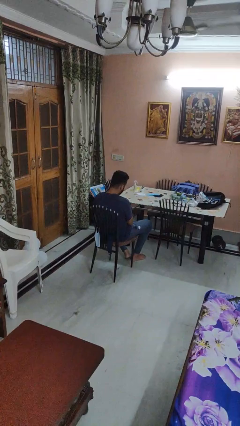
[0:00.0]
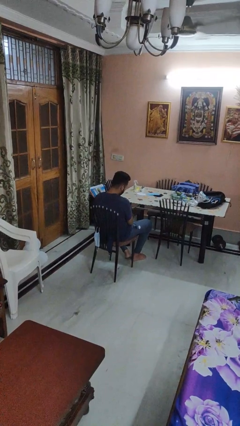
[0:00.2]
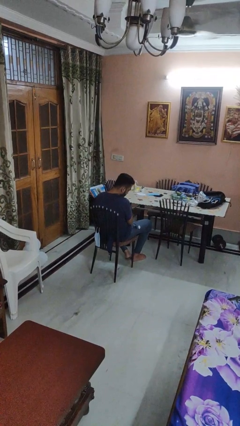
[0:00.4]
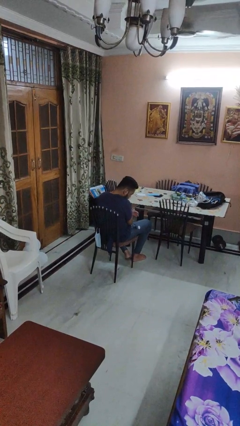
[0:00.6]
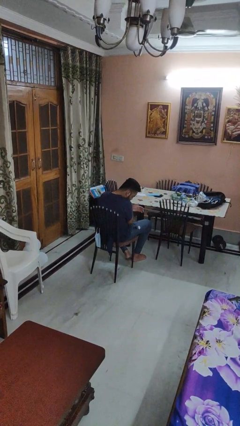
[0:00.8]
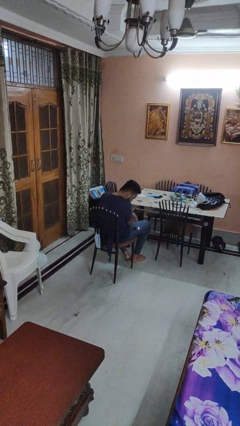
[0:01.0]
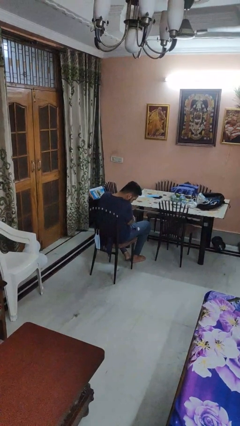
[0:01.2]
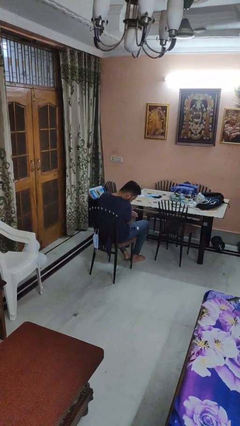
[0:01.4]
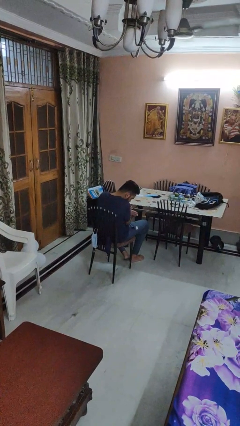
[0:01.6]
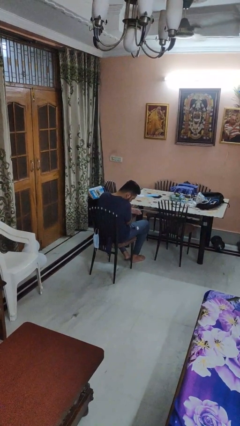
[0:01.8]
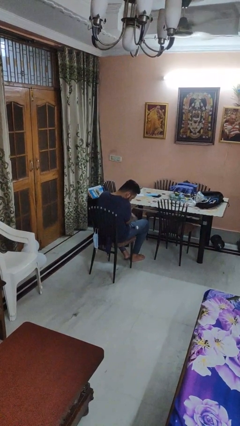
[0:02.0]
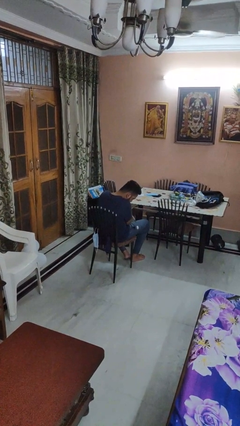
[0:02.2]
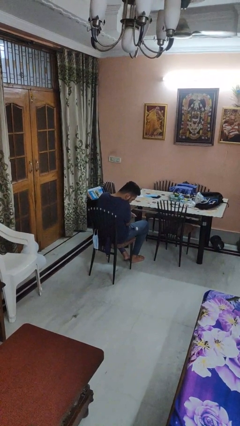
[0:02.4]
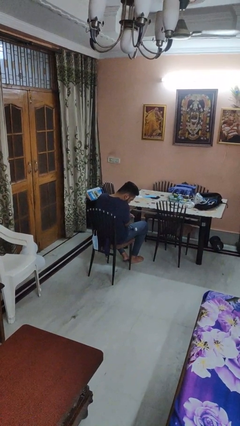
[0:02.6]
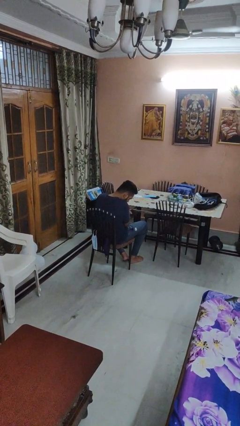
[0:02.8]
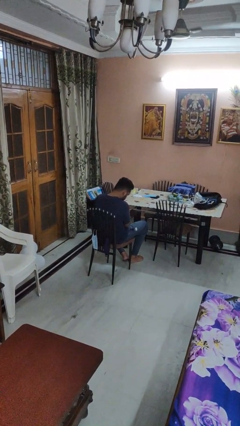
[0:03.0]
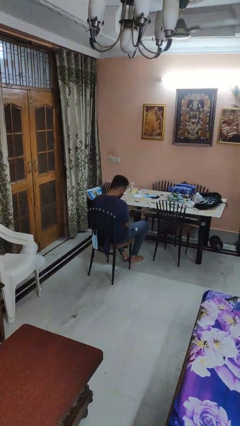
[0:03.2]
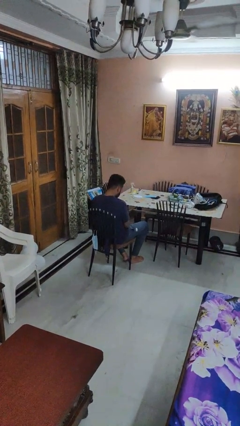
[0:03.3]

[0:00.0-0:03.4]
person swats bug

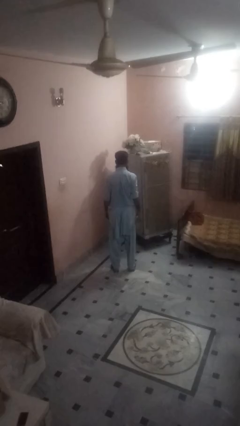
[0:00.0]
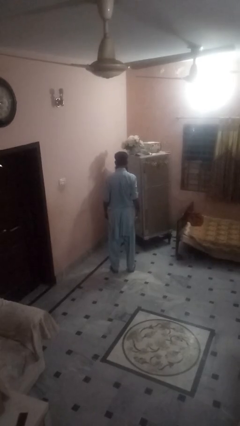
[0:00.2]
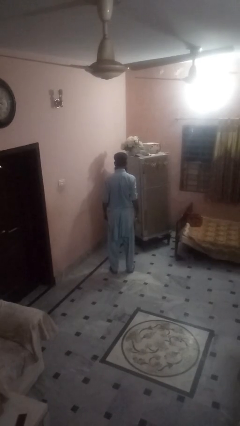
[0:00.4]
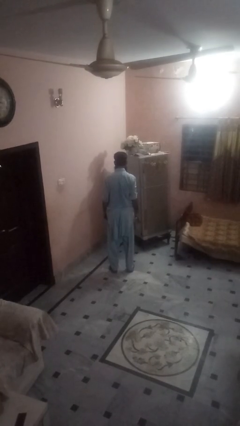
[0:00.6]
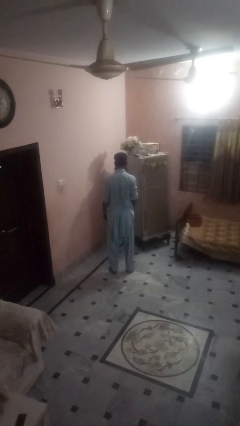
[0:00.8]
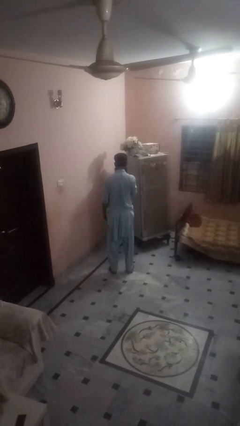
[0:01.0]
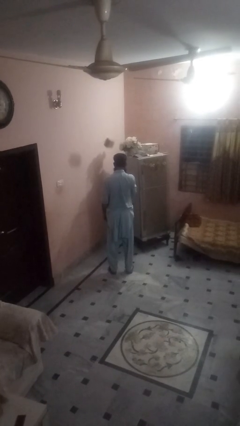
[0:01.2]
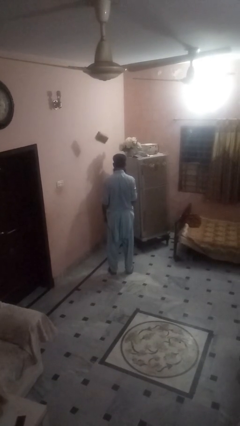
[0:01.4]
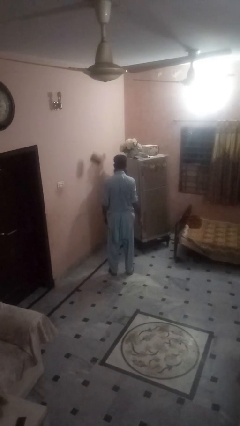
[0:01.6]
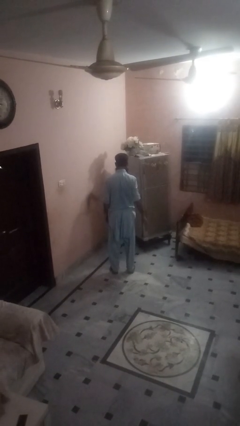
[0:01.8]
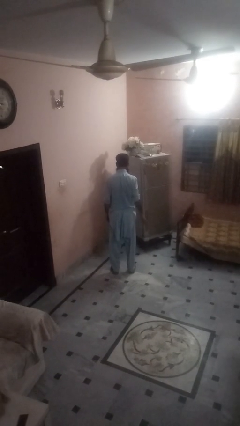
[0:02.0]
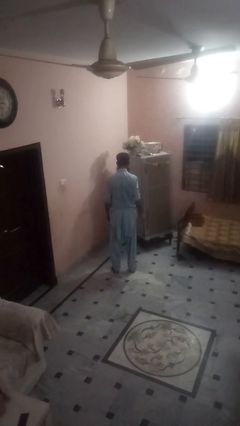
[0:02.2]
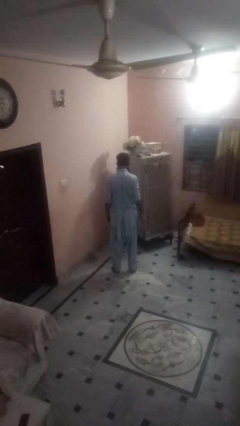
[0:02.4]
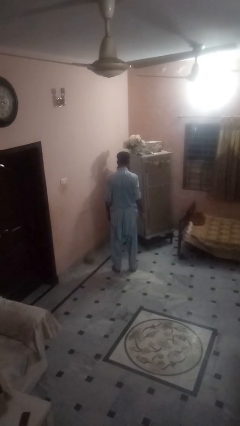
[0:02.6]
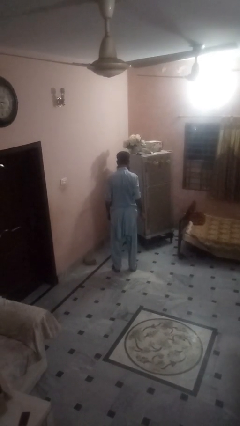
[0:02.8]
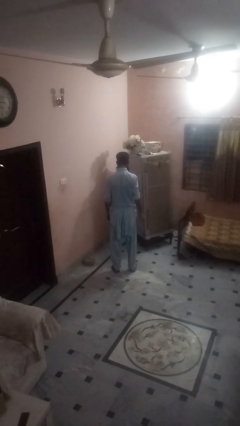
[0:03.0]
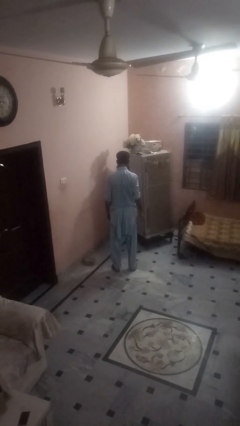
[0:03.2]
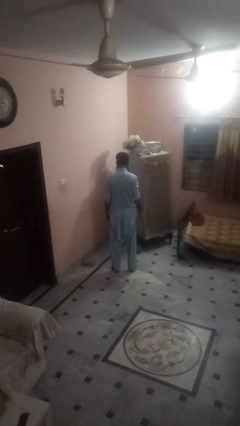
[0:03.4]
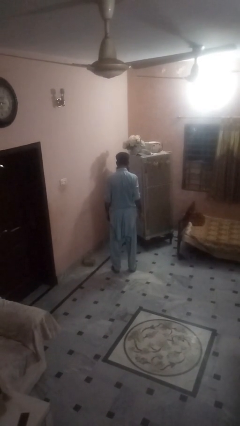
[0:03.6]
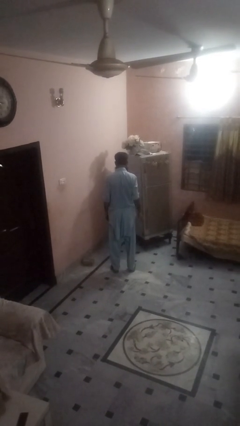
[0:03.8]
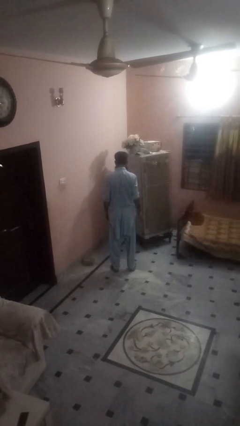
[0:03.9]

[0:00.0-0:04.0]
person throws object into air

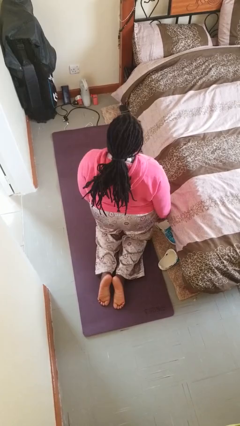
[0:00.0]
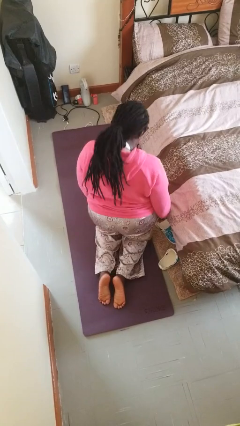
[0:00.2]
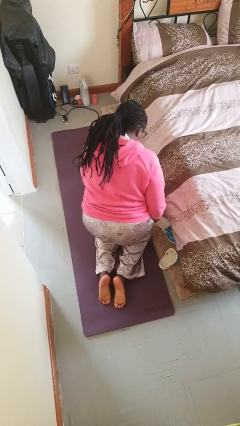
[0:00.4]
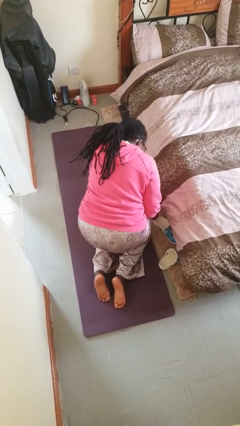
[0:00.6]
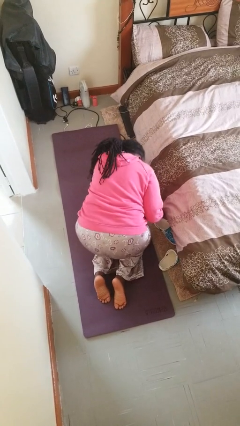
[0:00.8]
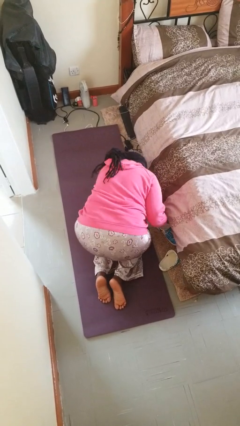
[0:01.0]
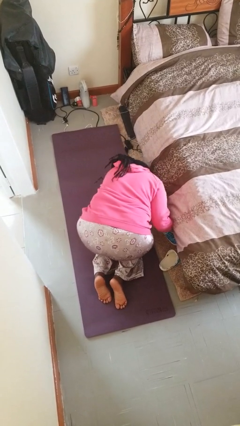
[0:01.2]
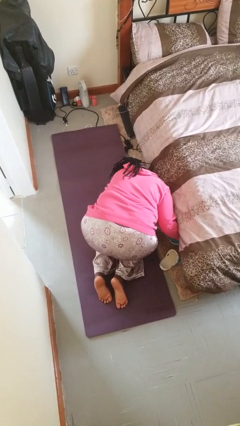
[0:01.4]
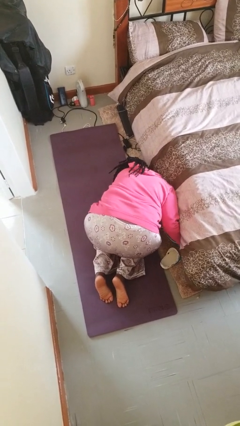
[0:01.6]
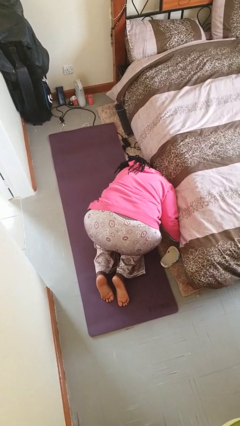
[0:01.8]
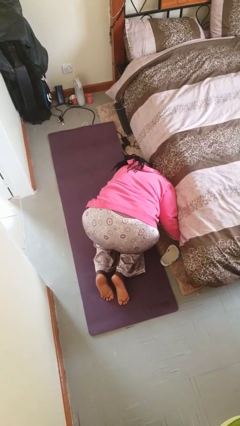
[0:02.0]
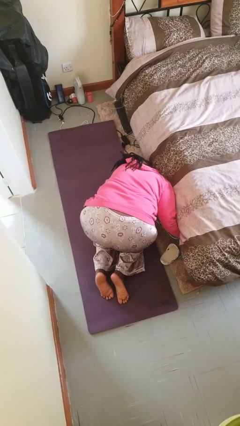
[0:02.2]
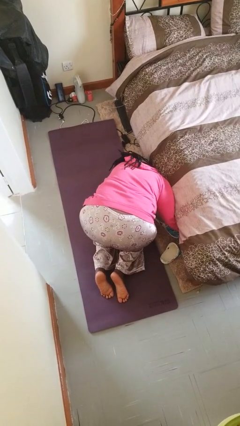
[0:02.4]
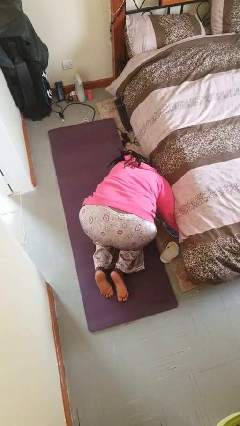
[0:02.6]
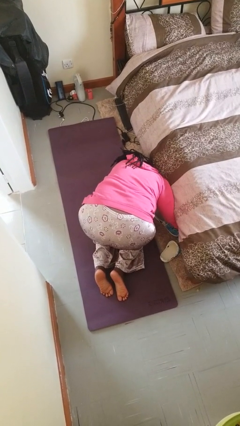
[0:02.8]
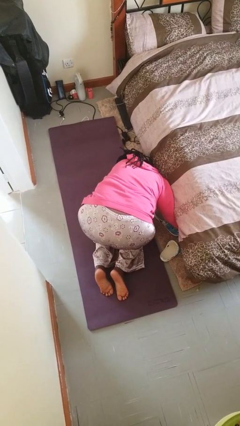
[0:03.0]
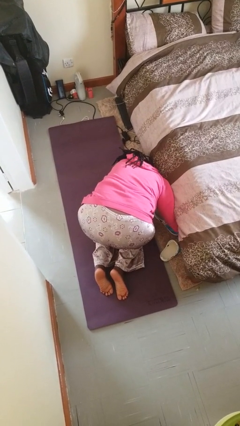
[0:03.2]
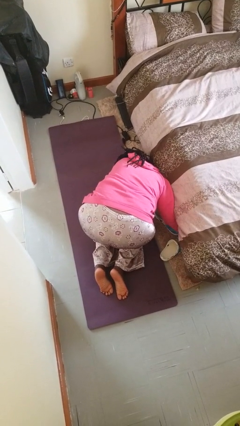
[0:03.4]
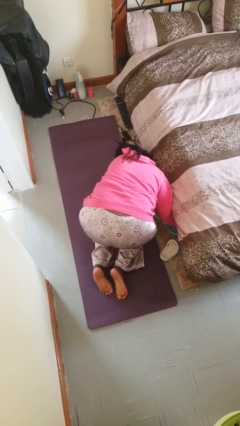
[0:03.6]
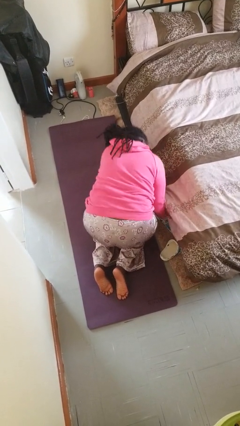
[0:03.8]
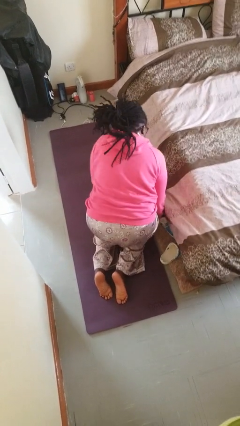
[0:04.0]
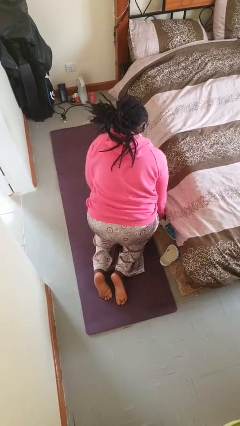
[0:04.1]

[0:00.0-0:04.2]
person searches under bed

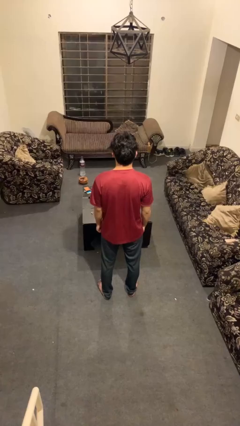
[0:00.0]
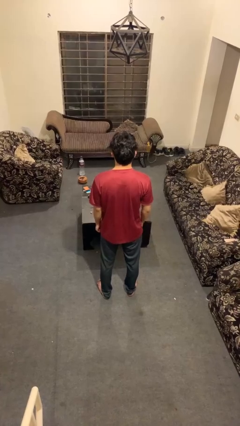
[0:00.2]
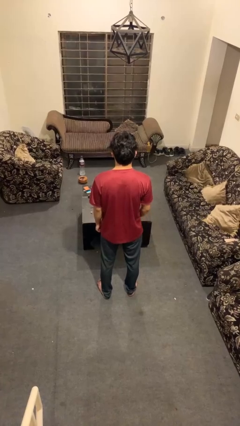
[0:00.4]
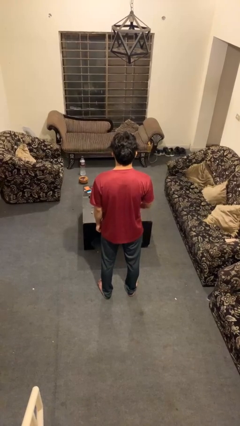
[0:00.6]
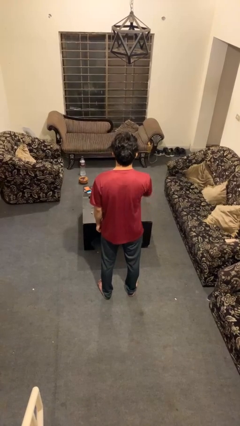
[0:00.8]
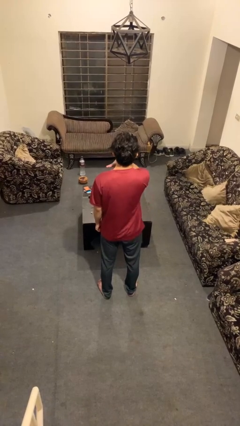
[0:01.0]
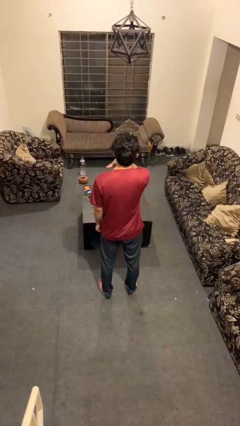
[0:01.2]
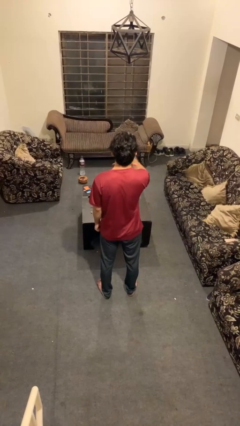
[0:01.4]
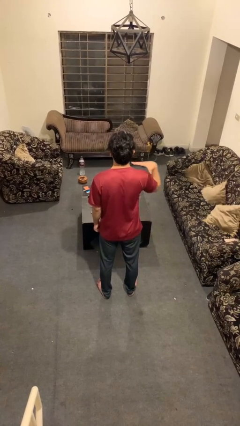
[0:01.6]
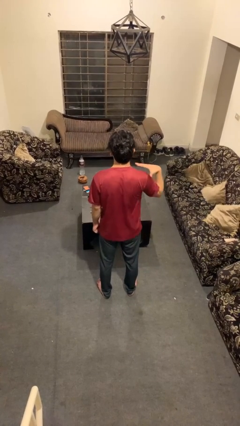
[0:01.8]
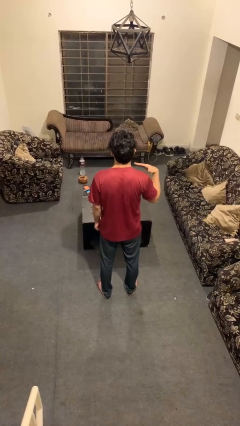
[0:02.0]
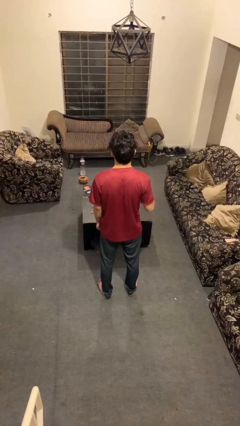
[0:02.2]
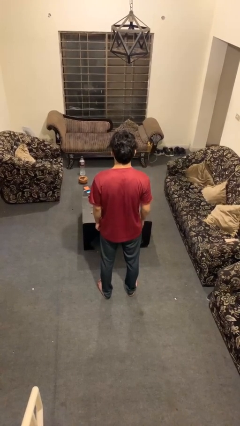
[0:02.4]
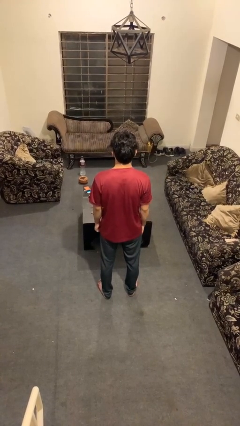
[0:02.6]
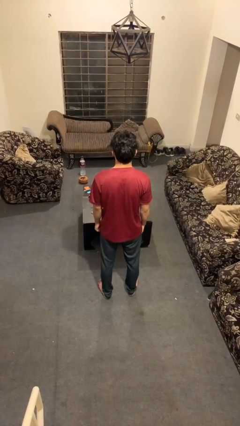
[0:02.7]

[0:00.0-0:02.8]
person gestures cut

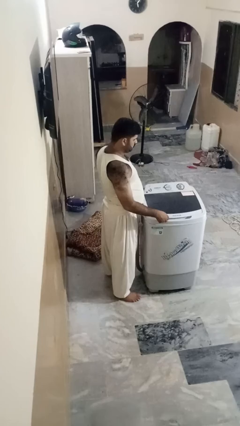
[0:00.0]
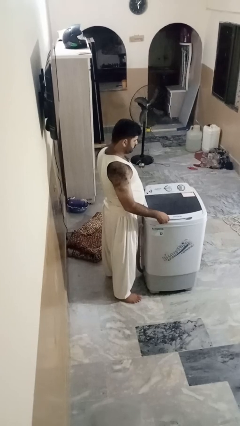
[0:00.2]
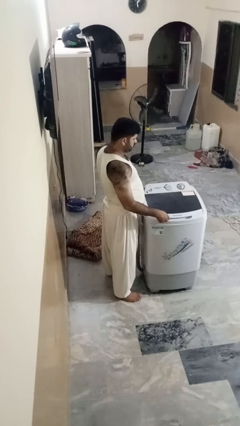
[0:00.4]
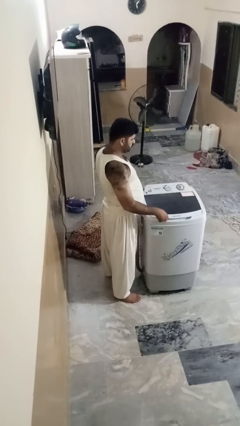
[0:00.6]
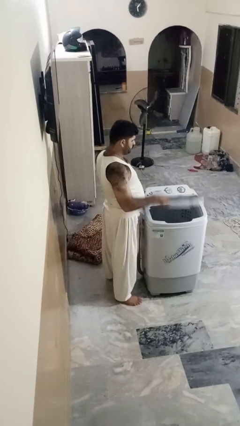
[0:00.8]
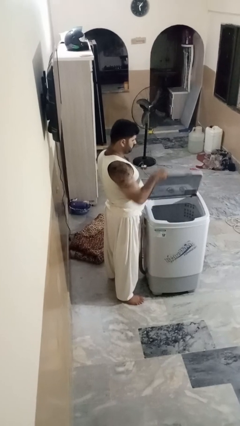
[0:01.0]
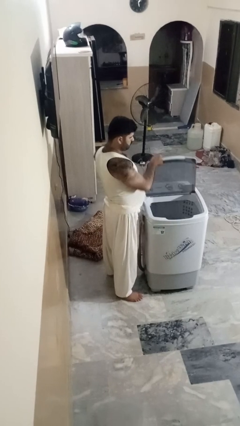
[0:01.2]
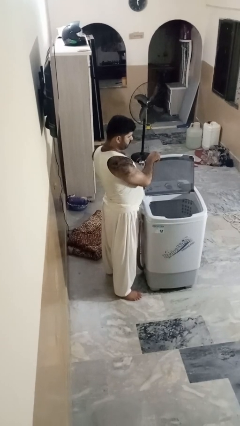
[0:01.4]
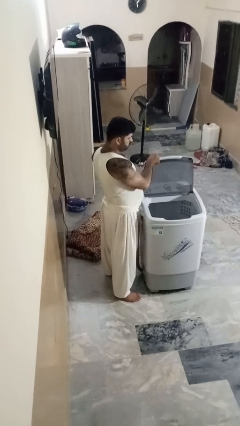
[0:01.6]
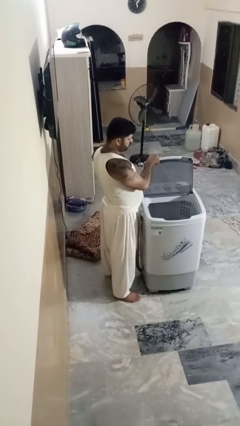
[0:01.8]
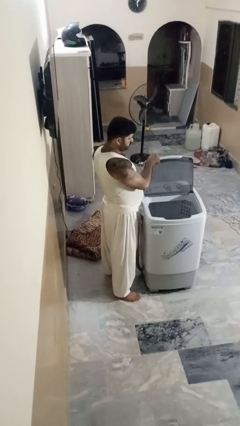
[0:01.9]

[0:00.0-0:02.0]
person opens clothes washer

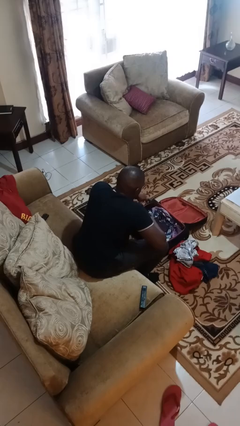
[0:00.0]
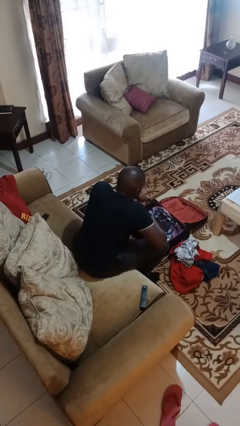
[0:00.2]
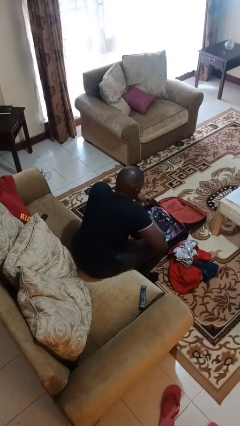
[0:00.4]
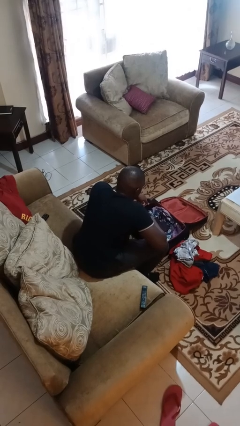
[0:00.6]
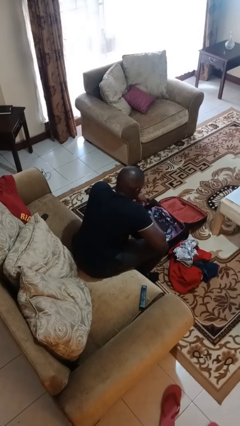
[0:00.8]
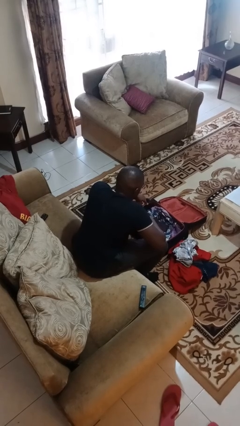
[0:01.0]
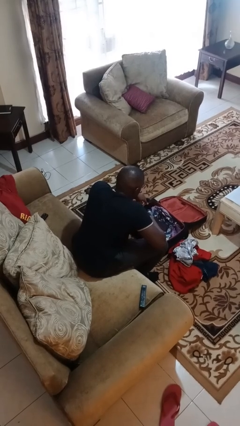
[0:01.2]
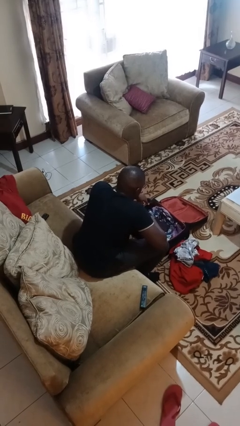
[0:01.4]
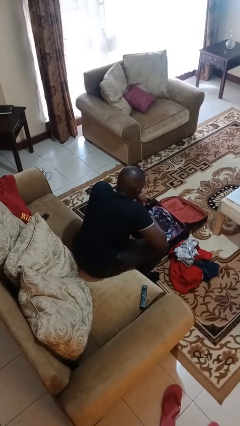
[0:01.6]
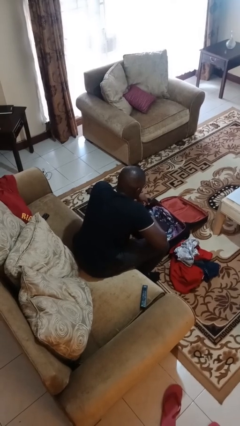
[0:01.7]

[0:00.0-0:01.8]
person unloads clothes from suitcase
